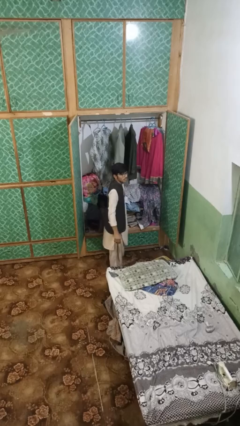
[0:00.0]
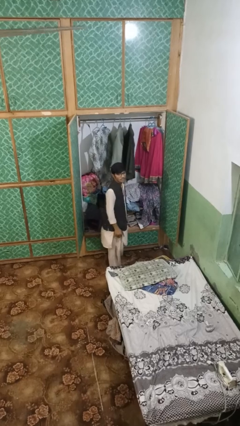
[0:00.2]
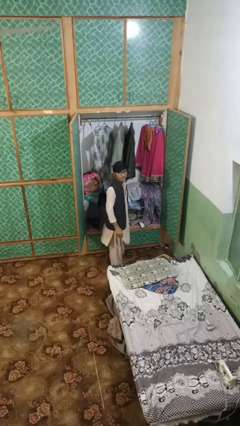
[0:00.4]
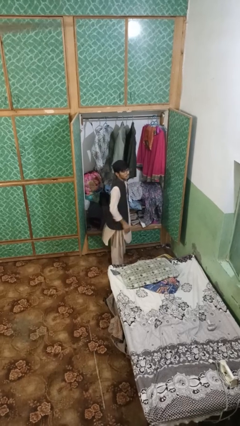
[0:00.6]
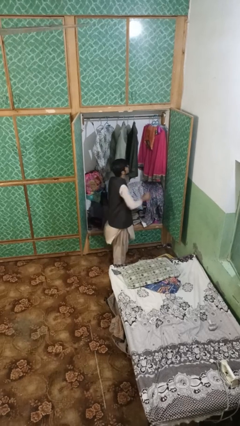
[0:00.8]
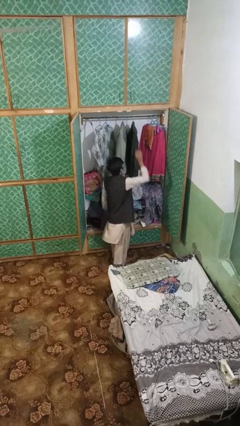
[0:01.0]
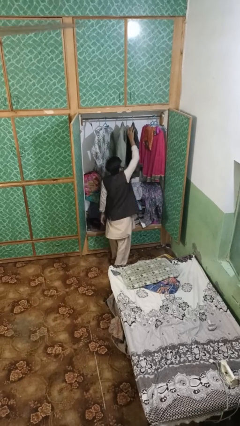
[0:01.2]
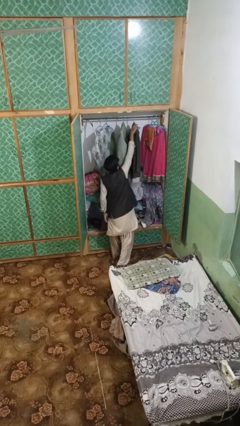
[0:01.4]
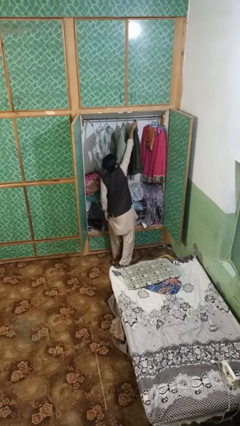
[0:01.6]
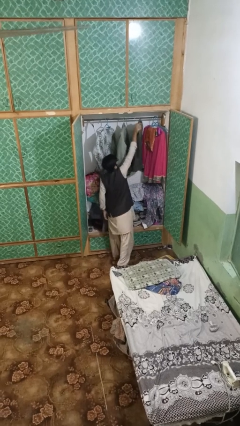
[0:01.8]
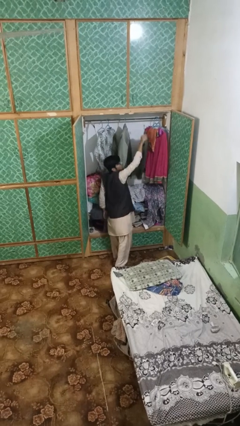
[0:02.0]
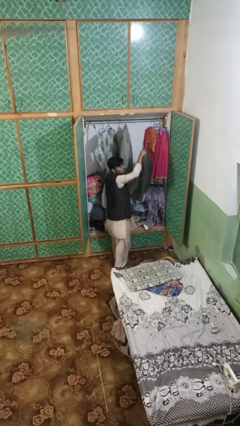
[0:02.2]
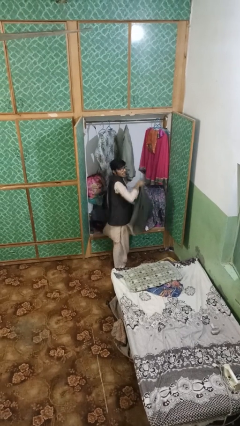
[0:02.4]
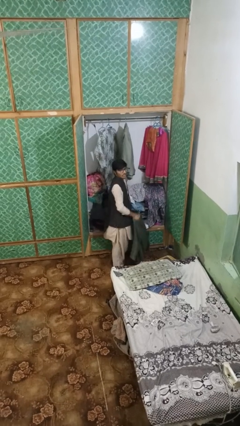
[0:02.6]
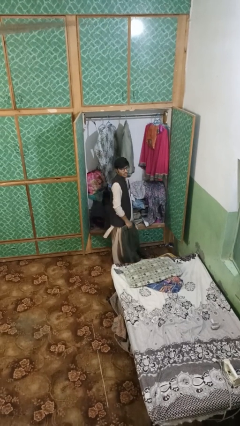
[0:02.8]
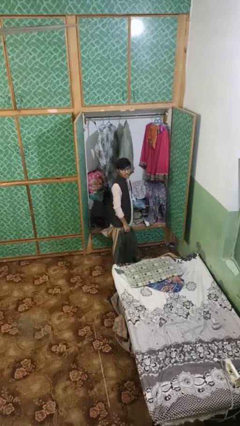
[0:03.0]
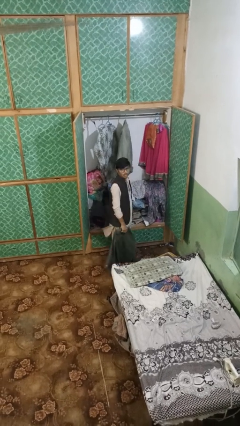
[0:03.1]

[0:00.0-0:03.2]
person takes clothes from closet

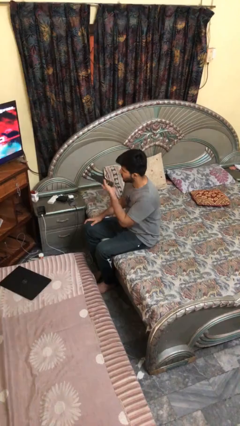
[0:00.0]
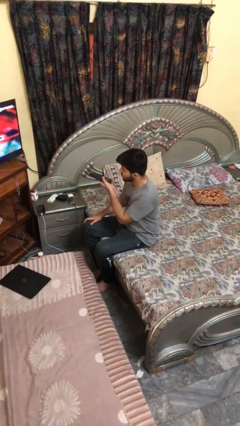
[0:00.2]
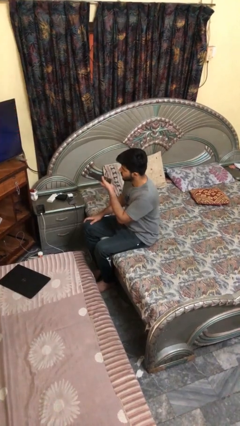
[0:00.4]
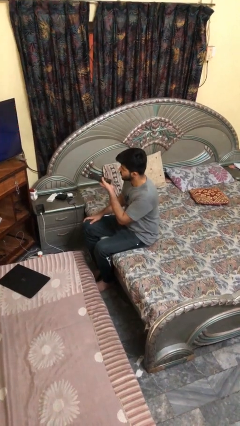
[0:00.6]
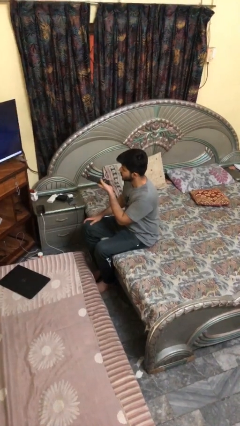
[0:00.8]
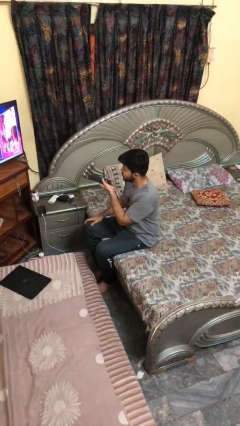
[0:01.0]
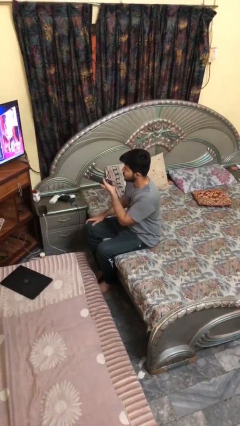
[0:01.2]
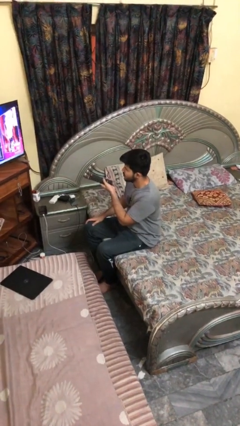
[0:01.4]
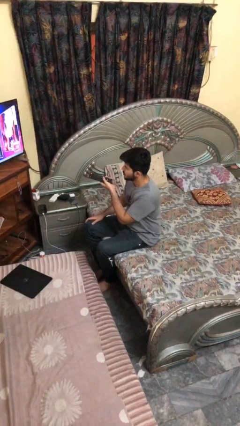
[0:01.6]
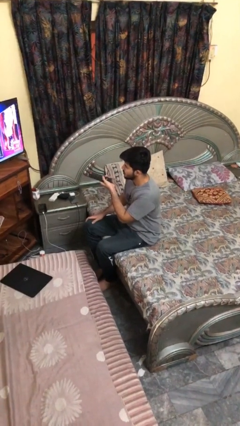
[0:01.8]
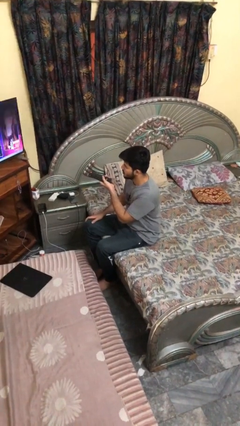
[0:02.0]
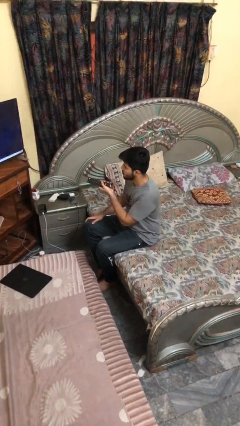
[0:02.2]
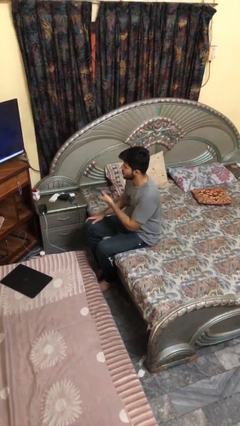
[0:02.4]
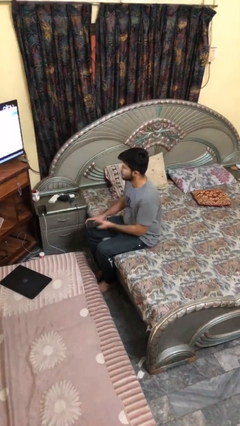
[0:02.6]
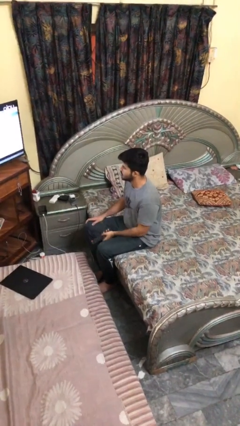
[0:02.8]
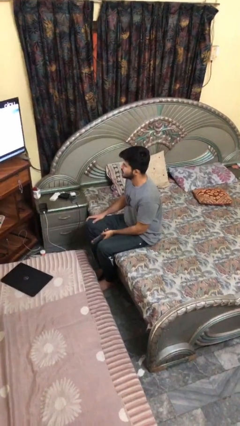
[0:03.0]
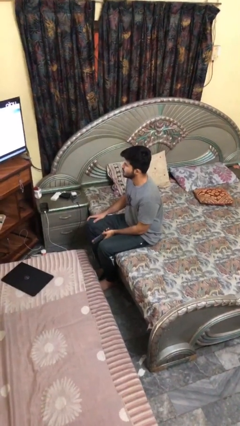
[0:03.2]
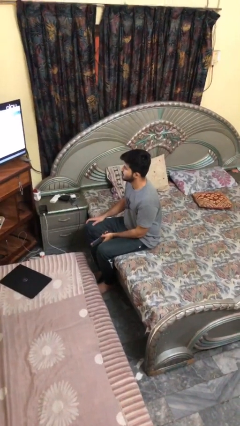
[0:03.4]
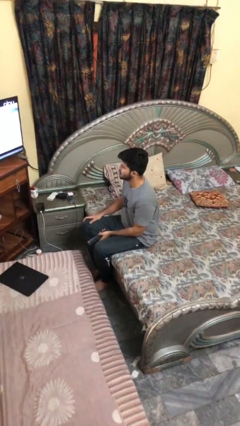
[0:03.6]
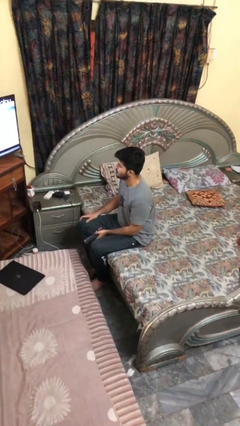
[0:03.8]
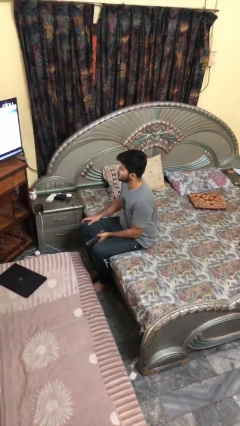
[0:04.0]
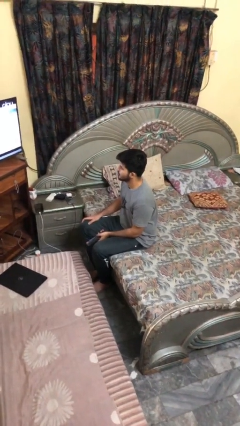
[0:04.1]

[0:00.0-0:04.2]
person uses television remote

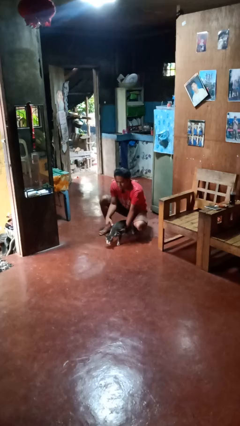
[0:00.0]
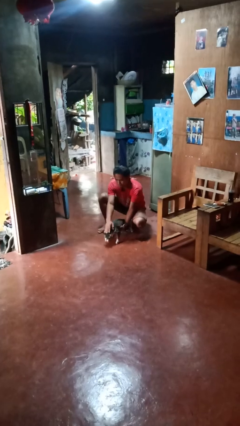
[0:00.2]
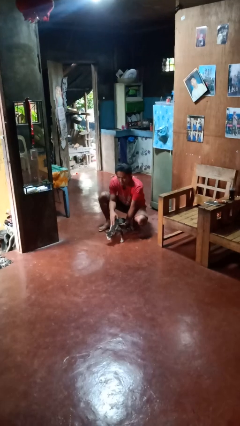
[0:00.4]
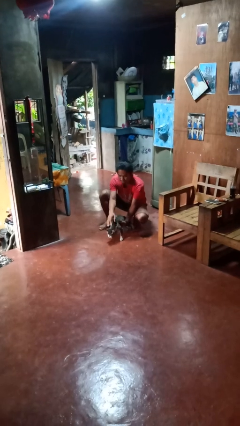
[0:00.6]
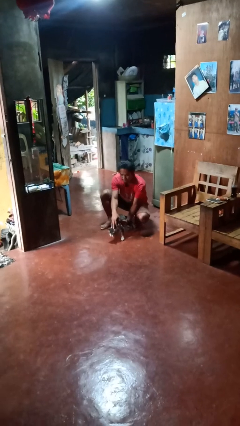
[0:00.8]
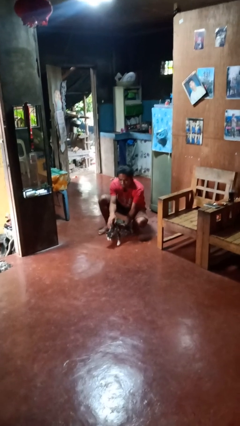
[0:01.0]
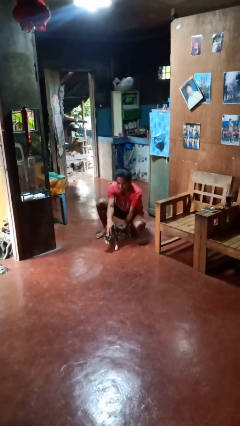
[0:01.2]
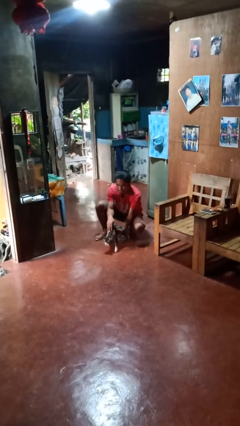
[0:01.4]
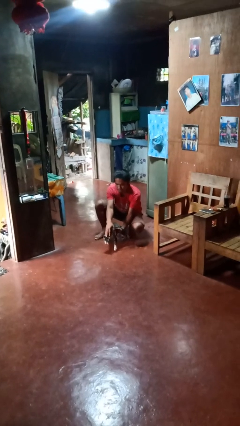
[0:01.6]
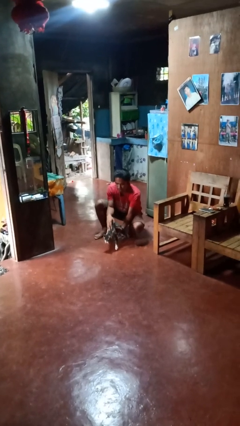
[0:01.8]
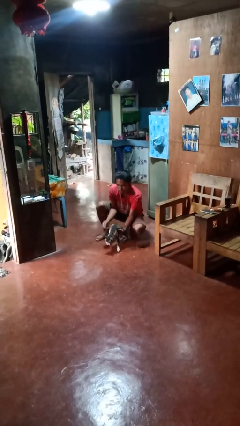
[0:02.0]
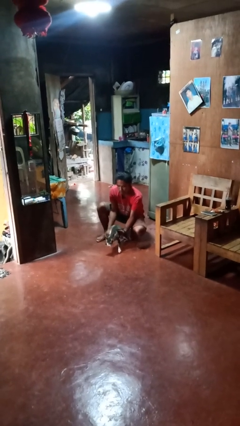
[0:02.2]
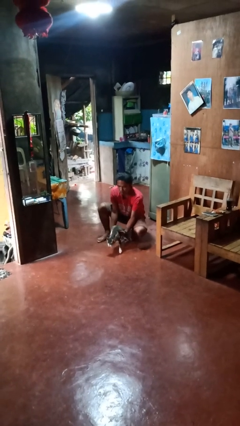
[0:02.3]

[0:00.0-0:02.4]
person pets cat

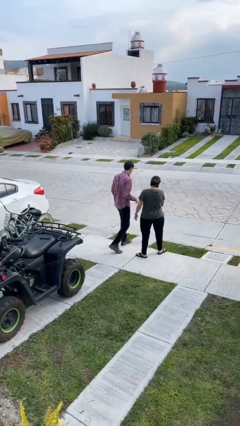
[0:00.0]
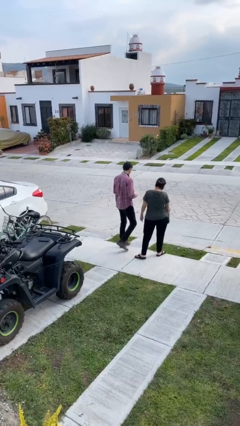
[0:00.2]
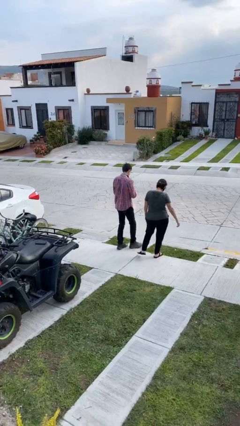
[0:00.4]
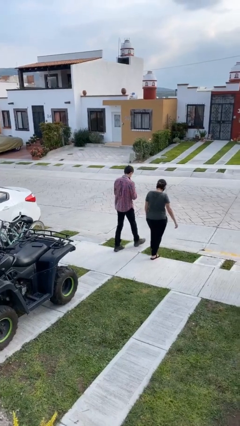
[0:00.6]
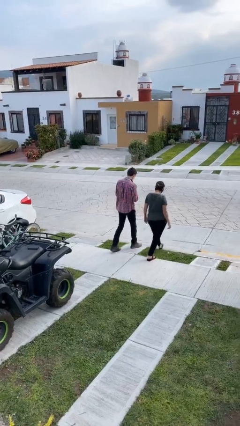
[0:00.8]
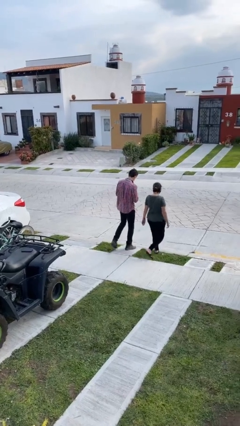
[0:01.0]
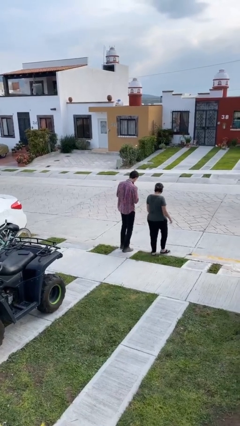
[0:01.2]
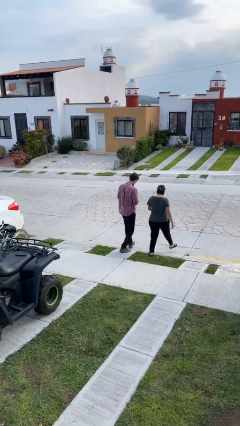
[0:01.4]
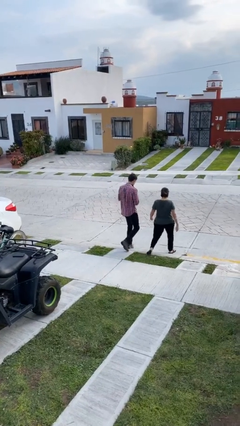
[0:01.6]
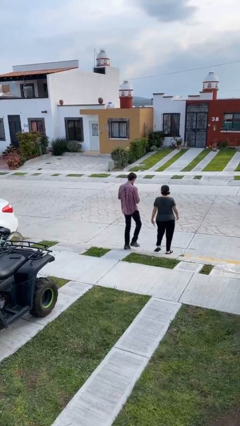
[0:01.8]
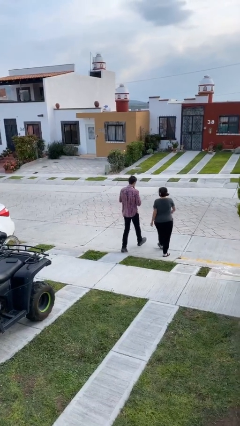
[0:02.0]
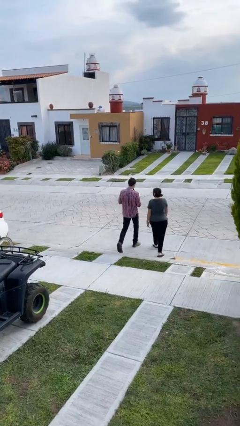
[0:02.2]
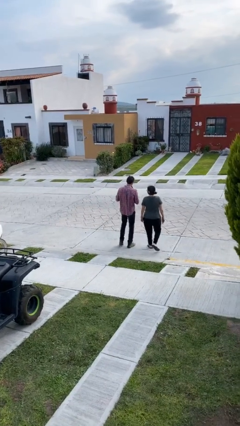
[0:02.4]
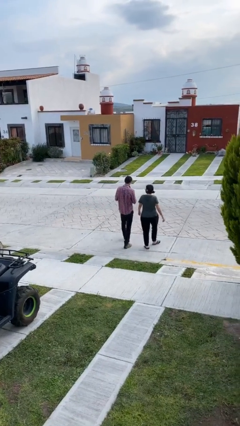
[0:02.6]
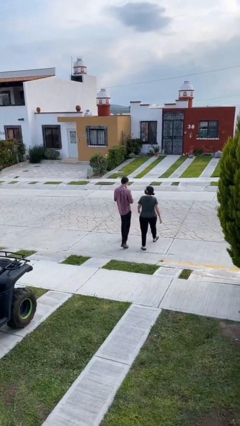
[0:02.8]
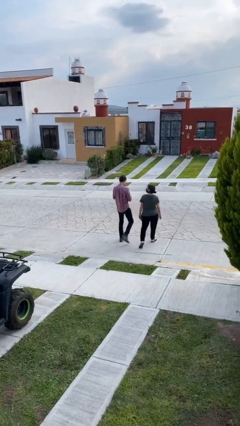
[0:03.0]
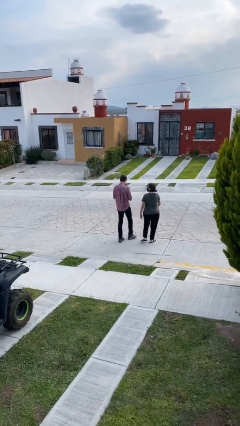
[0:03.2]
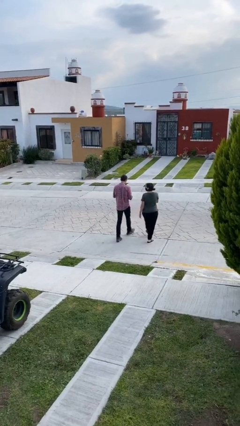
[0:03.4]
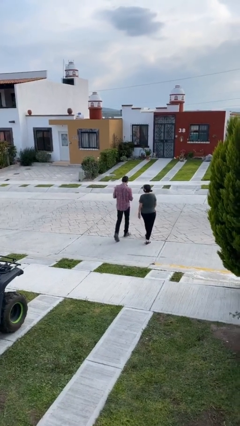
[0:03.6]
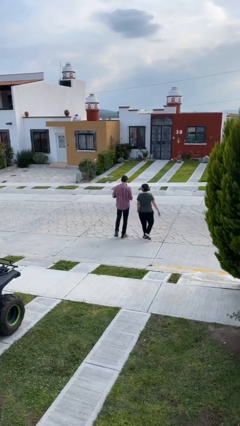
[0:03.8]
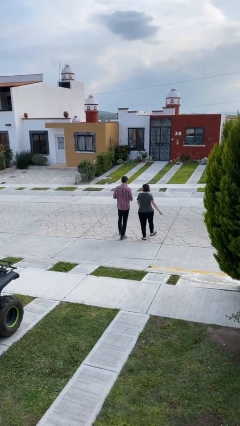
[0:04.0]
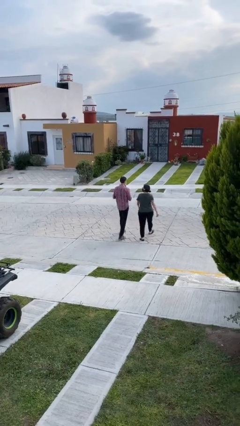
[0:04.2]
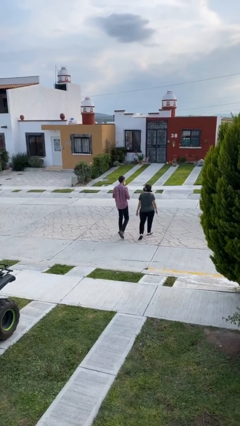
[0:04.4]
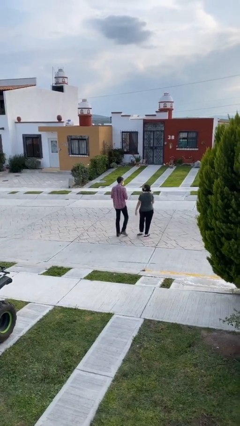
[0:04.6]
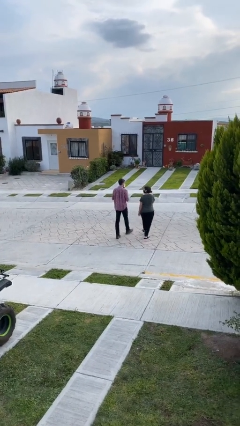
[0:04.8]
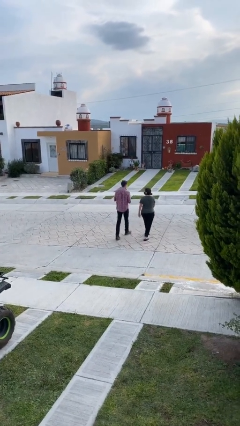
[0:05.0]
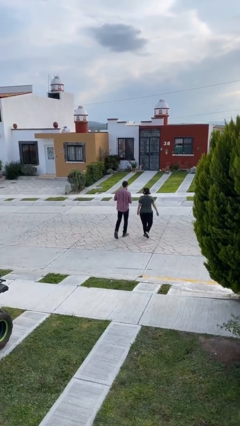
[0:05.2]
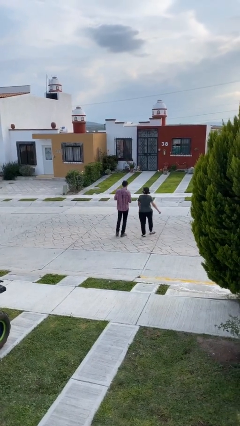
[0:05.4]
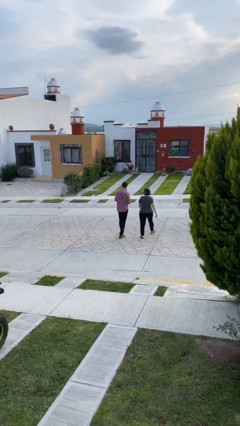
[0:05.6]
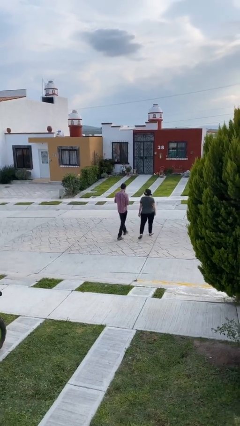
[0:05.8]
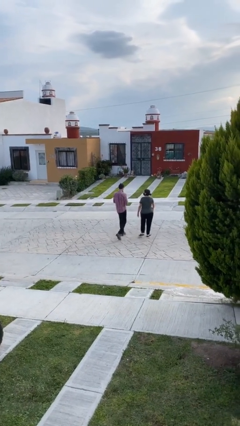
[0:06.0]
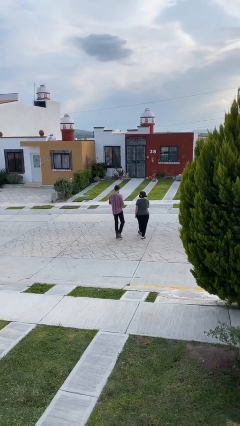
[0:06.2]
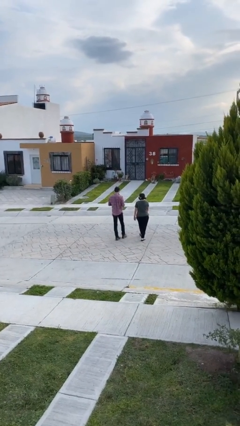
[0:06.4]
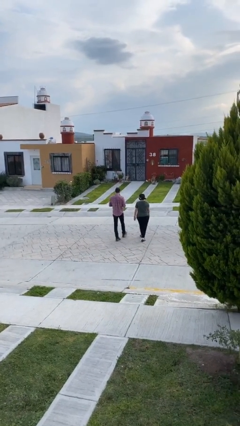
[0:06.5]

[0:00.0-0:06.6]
person talks to person

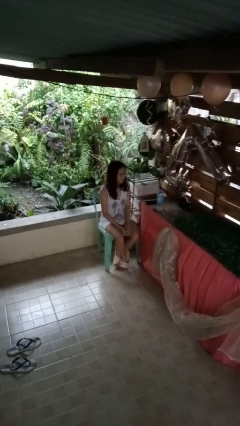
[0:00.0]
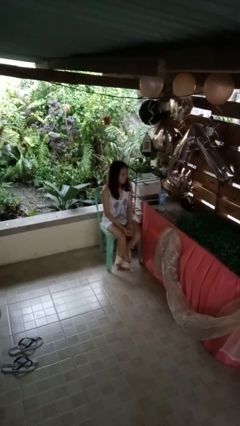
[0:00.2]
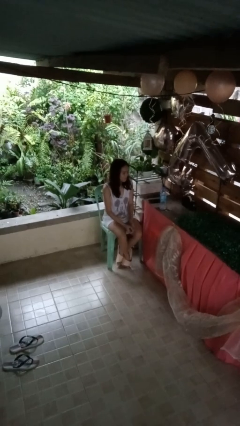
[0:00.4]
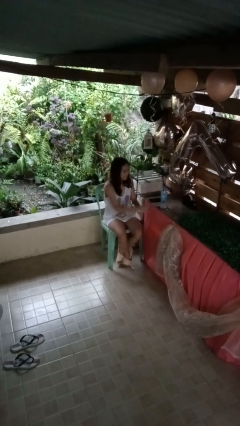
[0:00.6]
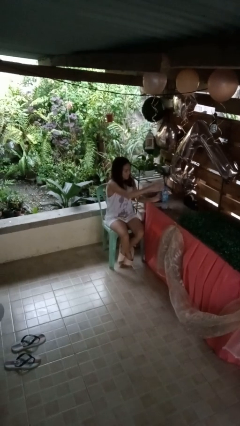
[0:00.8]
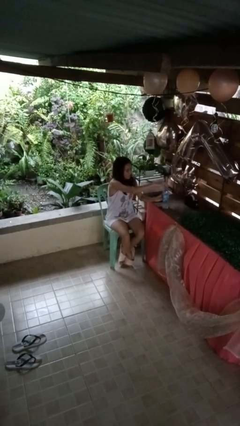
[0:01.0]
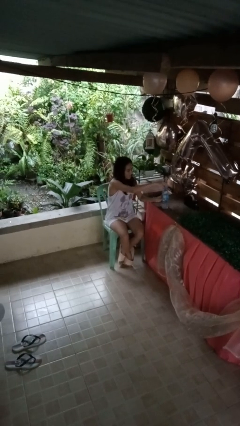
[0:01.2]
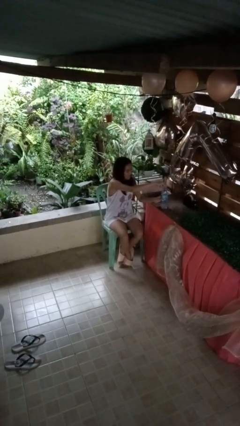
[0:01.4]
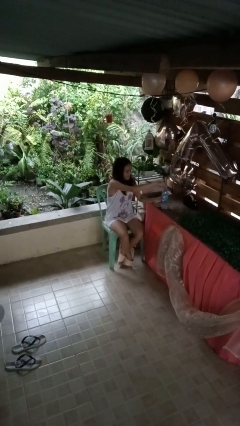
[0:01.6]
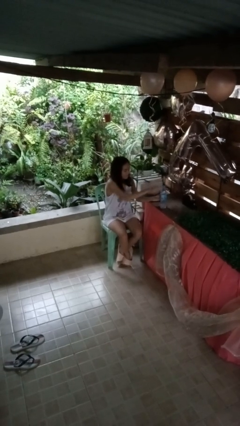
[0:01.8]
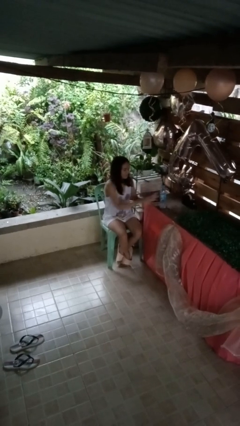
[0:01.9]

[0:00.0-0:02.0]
person screws lid to bottle
